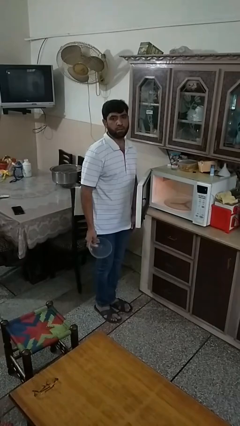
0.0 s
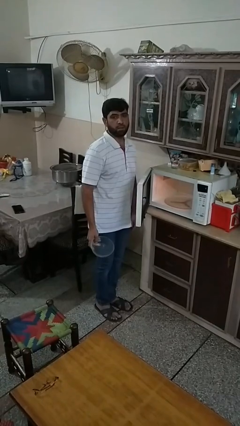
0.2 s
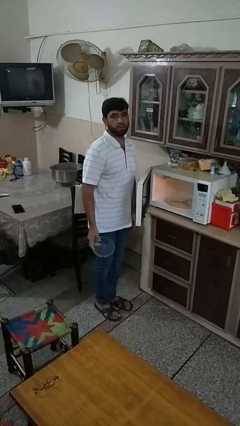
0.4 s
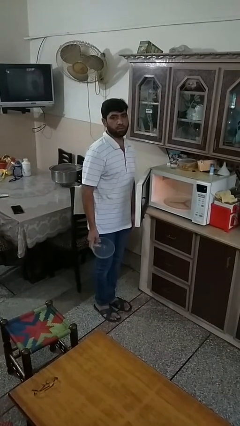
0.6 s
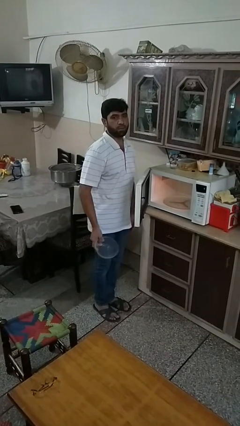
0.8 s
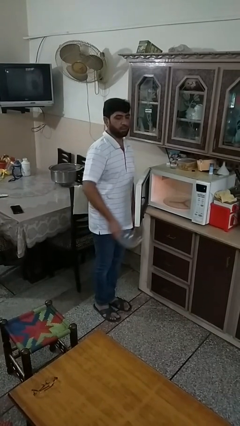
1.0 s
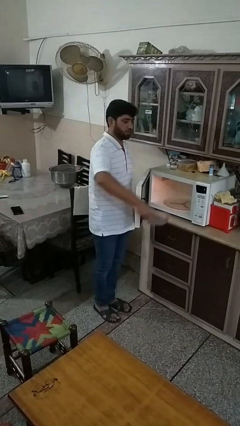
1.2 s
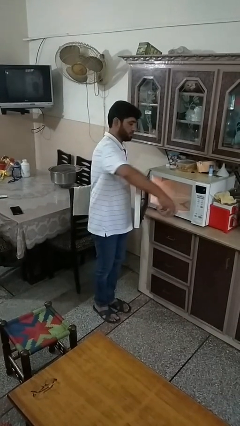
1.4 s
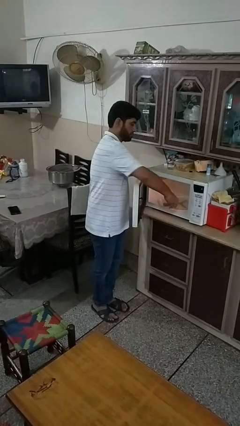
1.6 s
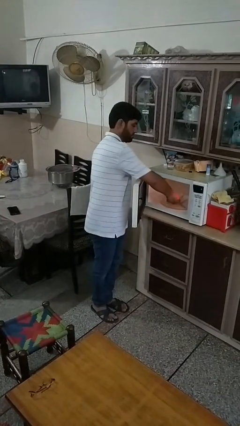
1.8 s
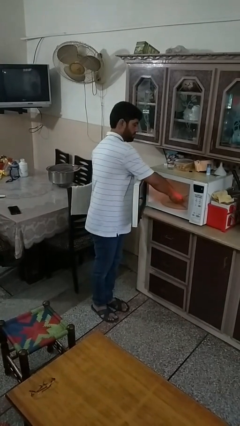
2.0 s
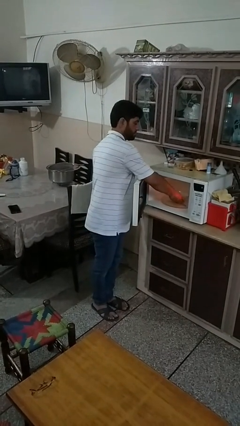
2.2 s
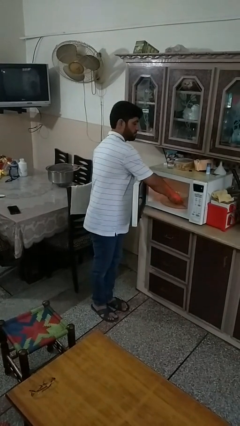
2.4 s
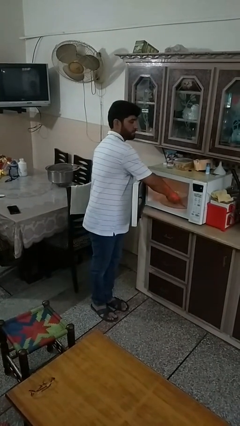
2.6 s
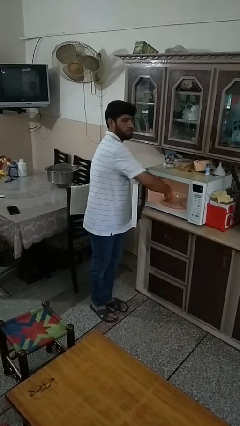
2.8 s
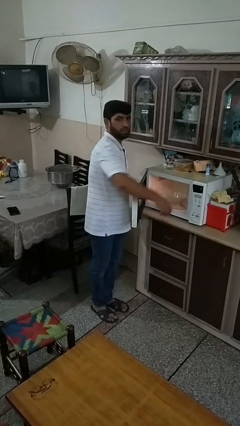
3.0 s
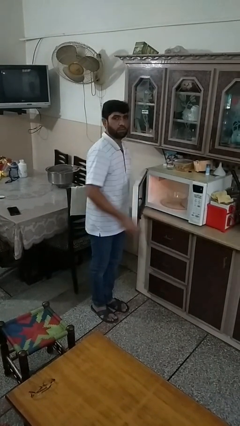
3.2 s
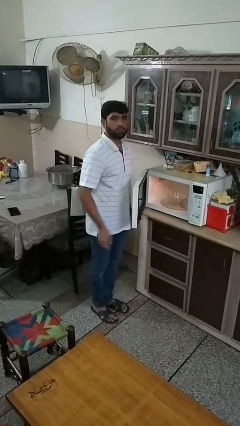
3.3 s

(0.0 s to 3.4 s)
person puts object into microwave

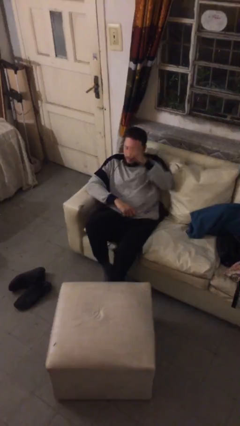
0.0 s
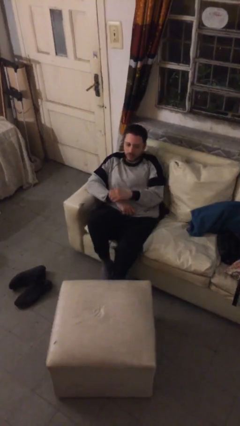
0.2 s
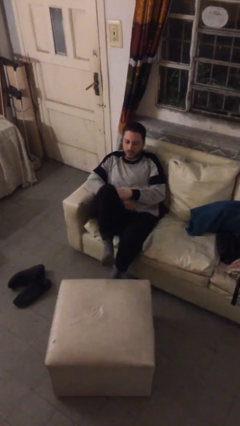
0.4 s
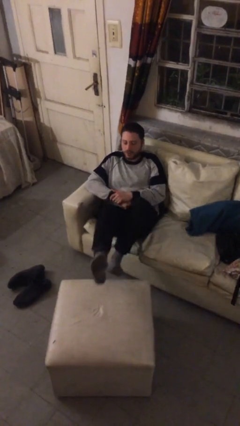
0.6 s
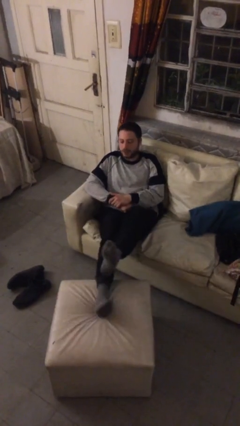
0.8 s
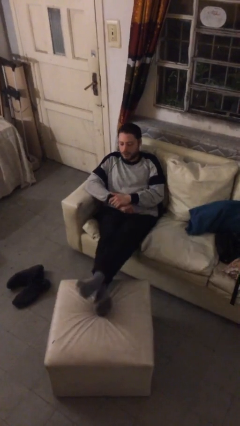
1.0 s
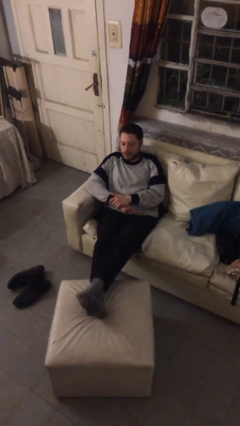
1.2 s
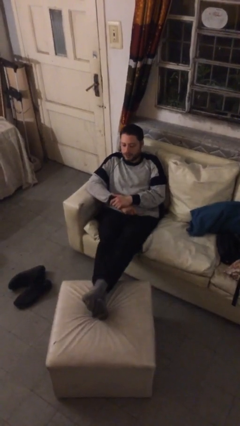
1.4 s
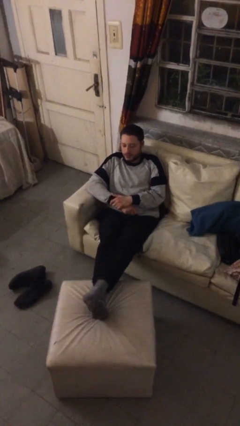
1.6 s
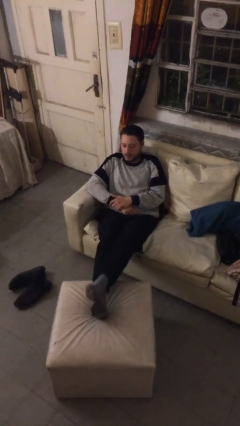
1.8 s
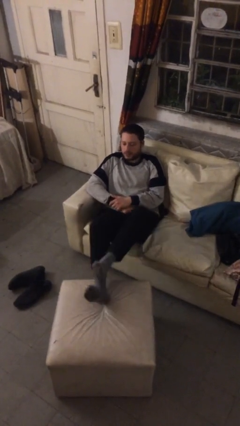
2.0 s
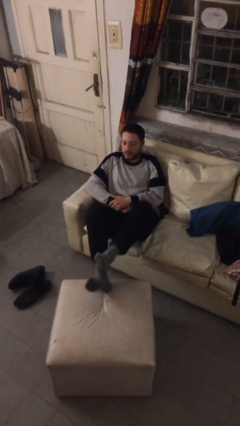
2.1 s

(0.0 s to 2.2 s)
person puts feet up

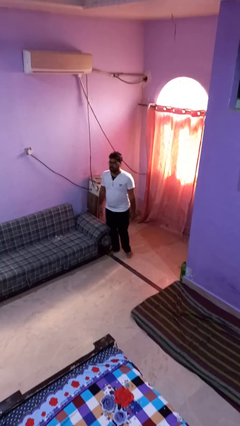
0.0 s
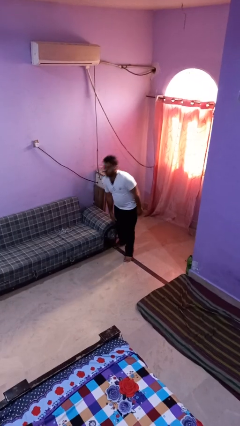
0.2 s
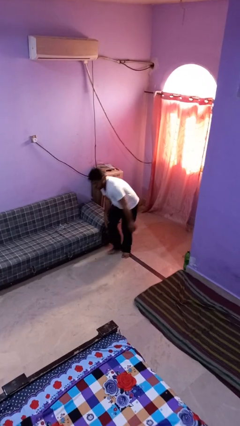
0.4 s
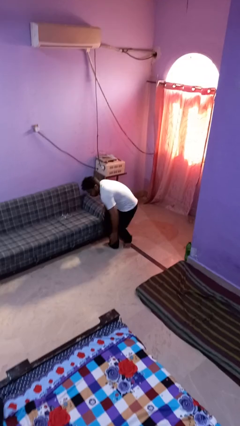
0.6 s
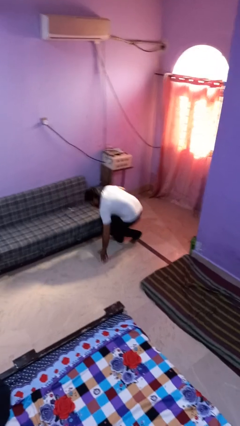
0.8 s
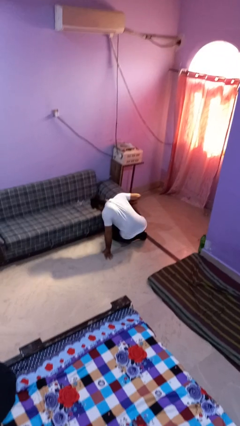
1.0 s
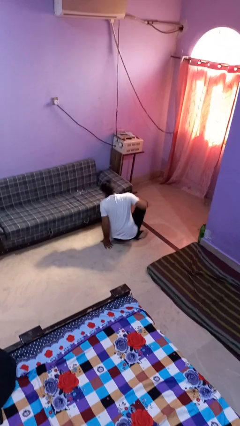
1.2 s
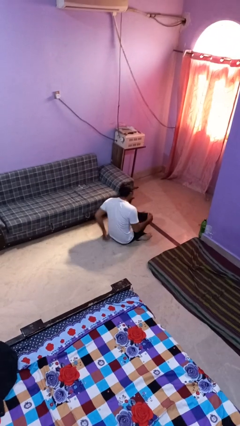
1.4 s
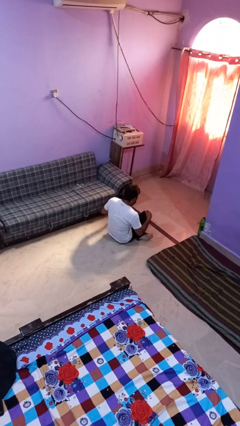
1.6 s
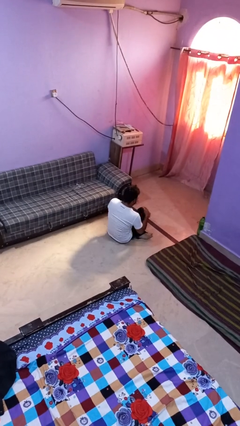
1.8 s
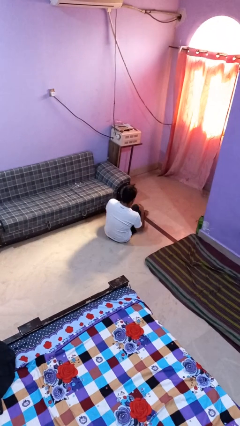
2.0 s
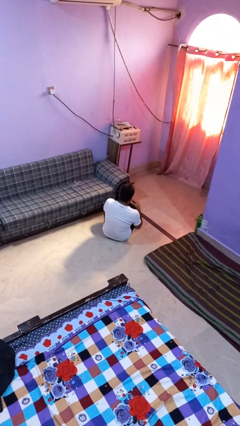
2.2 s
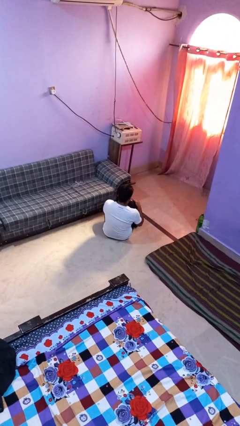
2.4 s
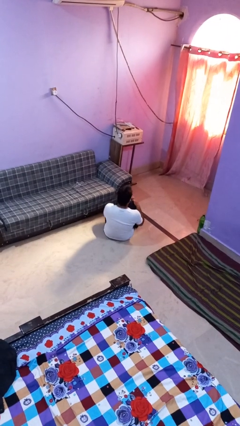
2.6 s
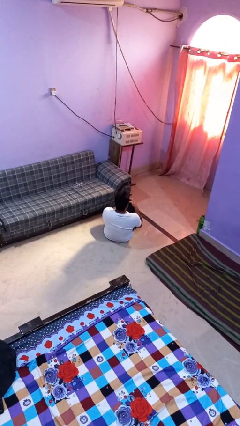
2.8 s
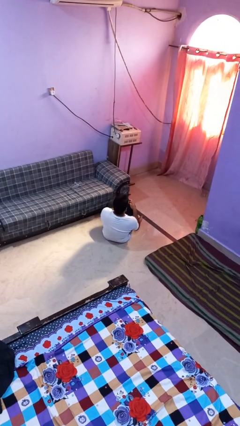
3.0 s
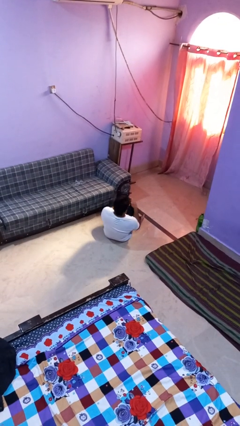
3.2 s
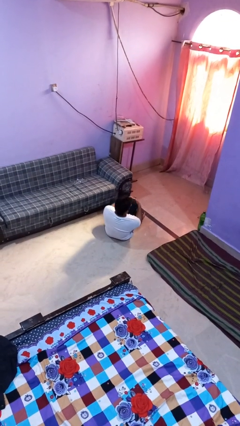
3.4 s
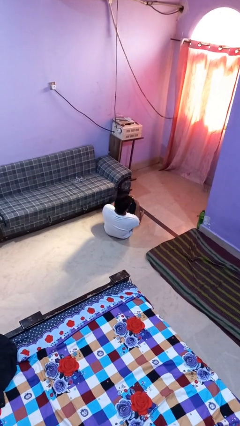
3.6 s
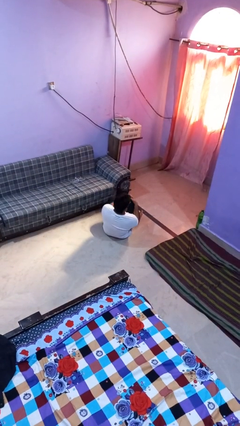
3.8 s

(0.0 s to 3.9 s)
person trips on object on floor

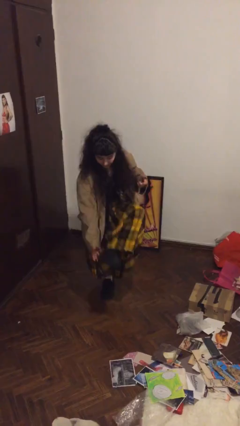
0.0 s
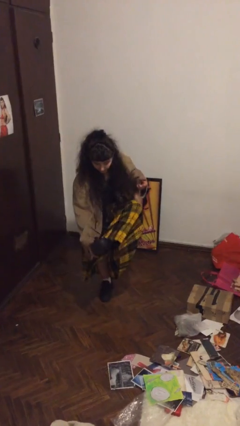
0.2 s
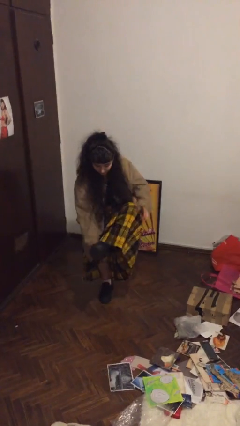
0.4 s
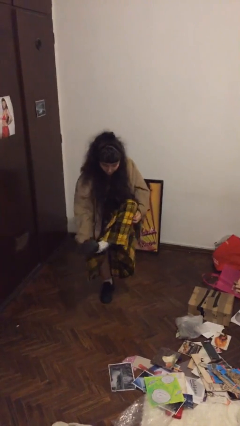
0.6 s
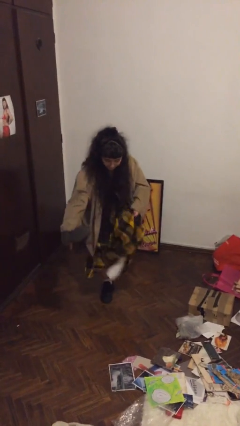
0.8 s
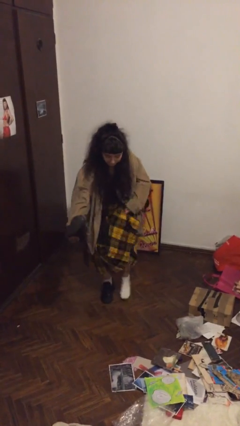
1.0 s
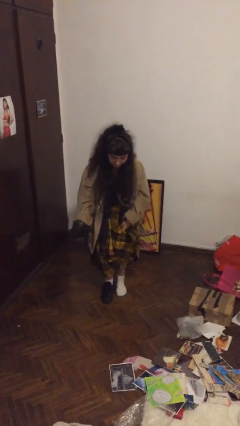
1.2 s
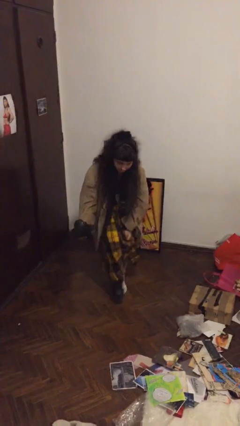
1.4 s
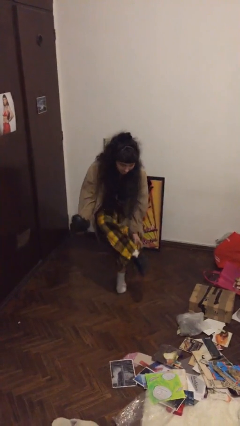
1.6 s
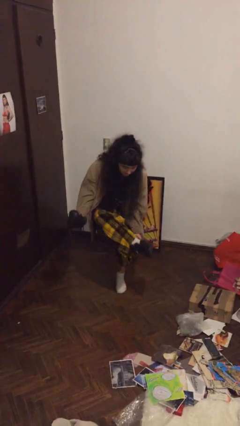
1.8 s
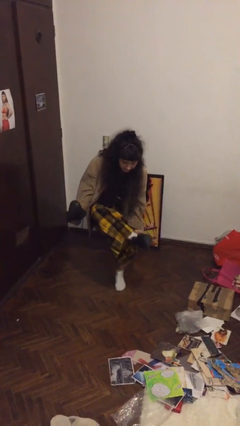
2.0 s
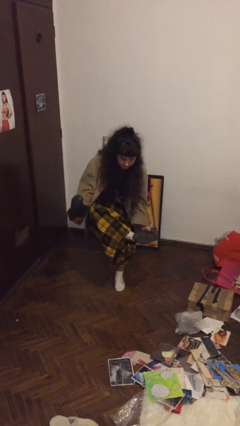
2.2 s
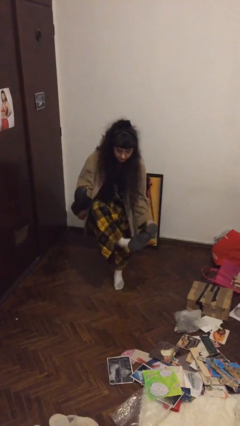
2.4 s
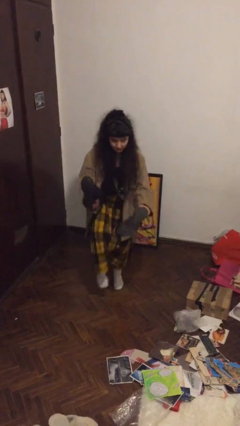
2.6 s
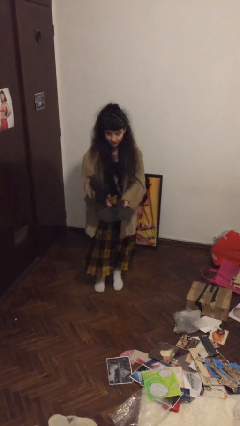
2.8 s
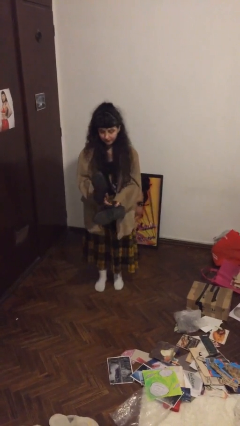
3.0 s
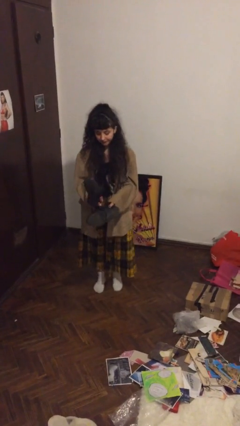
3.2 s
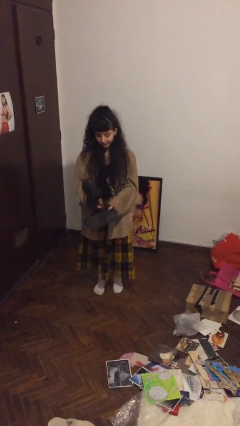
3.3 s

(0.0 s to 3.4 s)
person takes off shoes

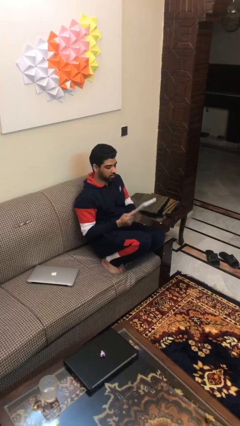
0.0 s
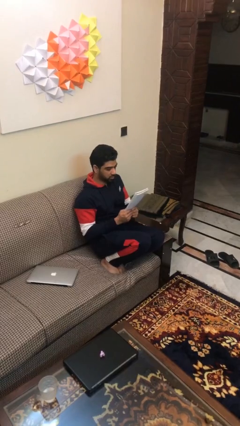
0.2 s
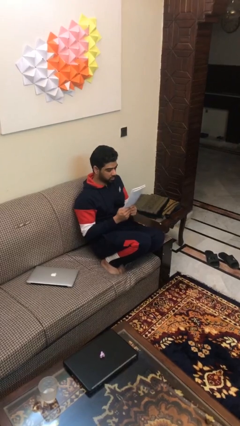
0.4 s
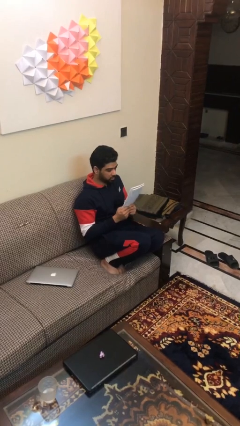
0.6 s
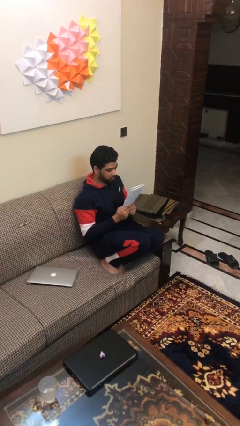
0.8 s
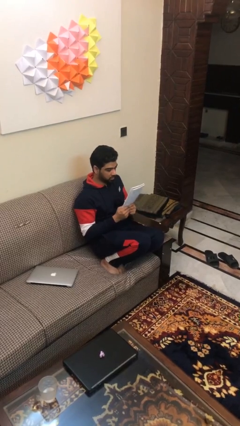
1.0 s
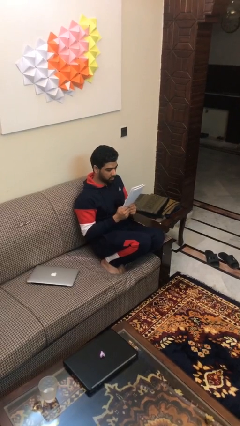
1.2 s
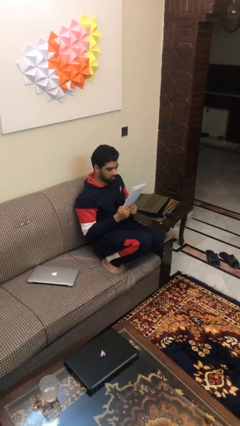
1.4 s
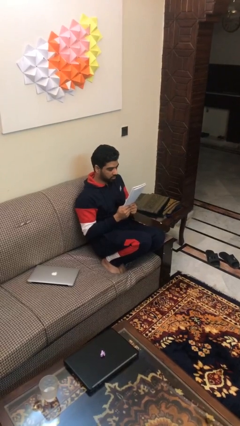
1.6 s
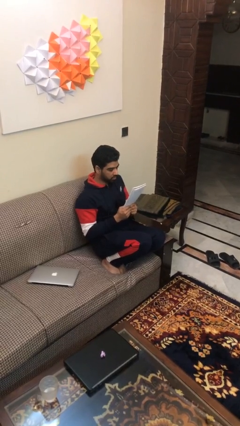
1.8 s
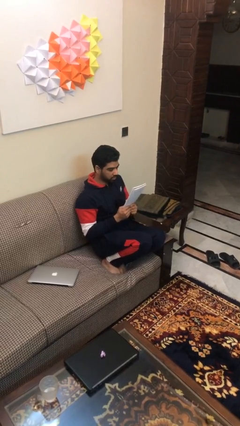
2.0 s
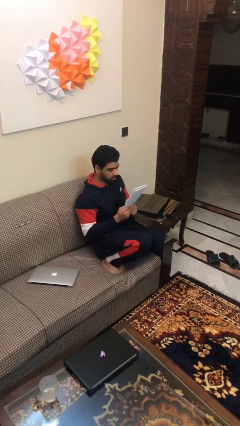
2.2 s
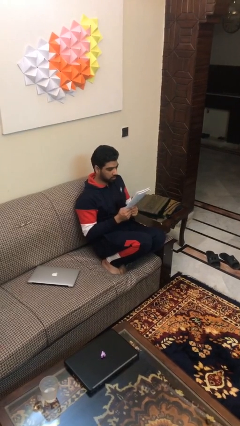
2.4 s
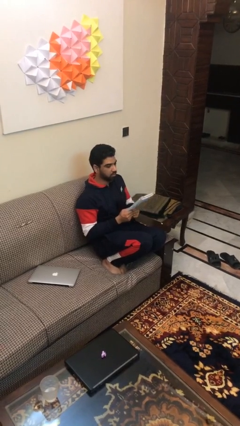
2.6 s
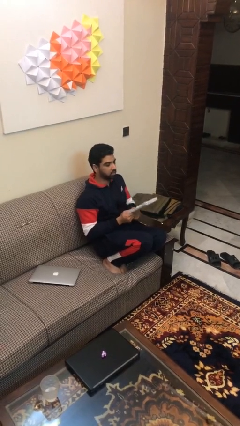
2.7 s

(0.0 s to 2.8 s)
person reads document

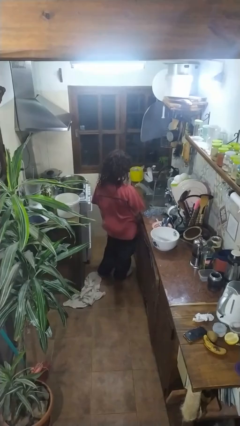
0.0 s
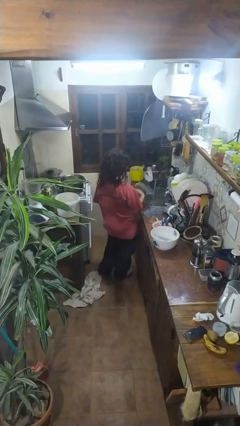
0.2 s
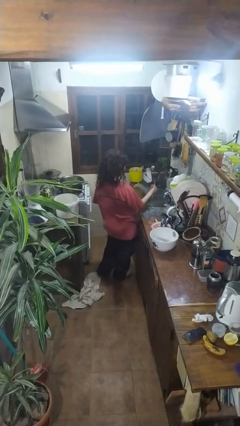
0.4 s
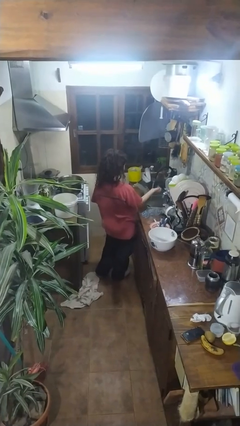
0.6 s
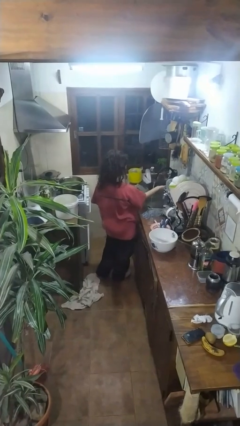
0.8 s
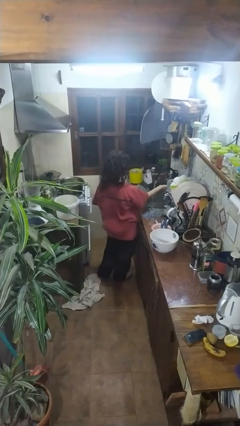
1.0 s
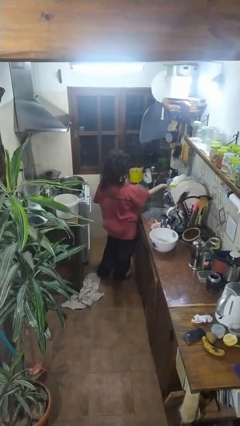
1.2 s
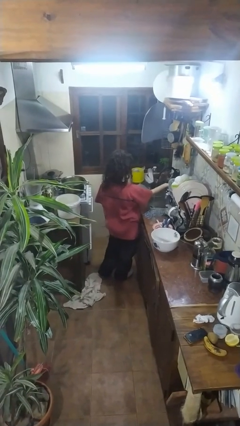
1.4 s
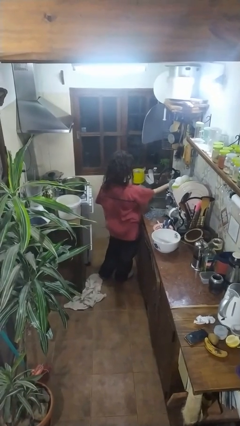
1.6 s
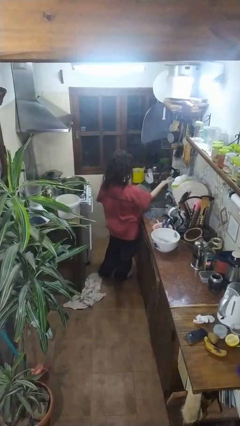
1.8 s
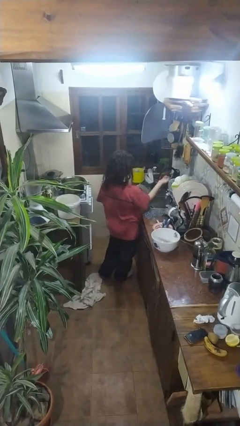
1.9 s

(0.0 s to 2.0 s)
person turns off faucet
